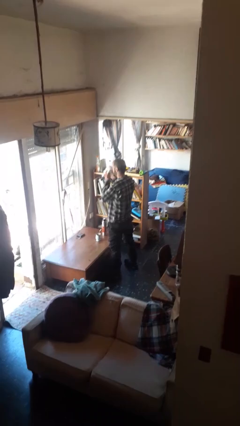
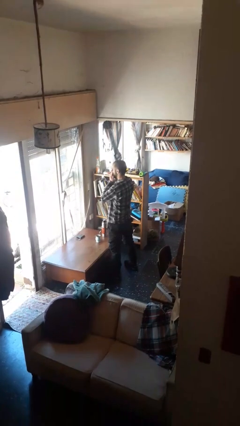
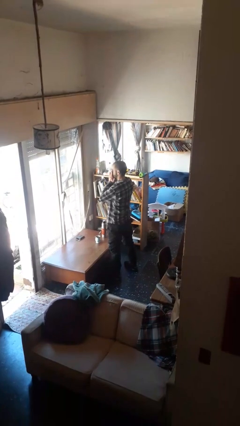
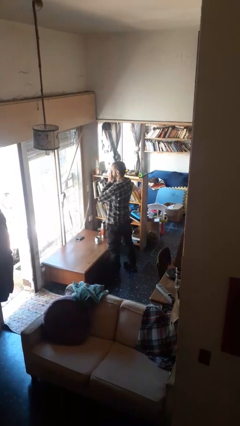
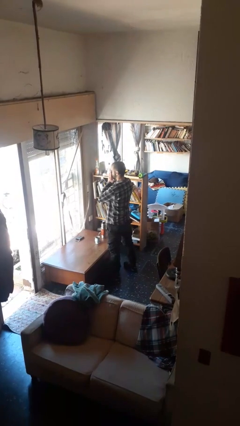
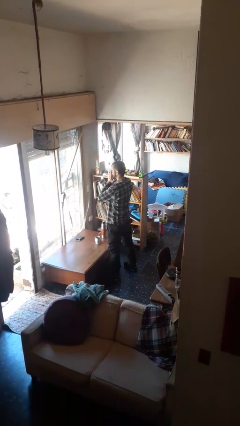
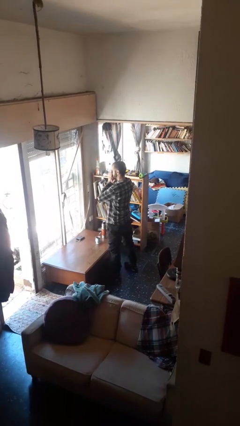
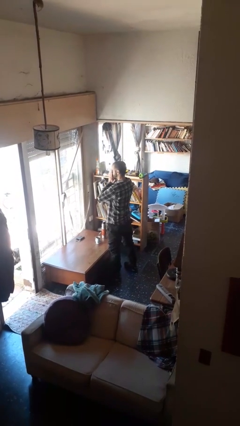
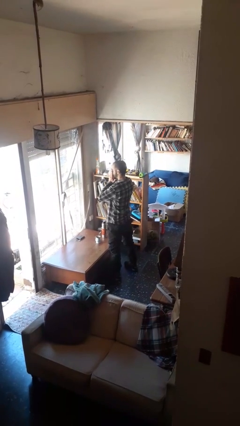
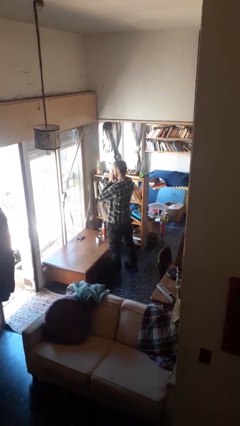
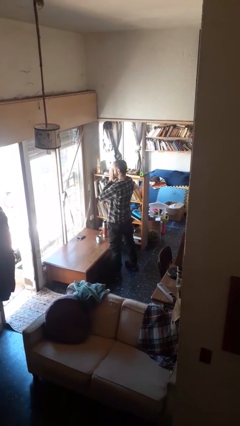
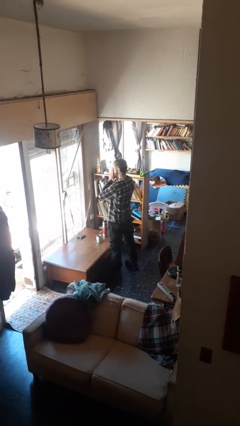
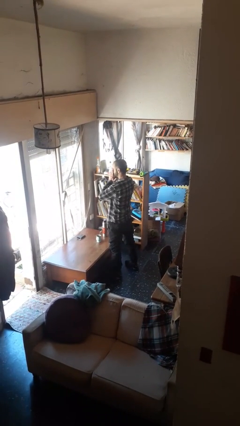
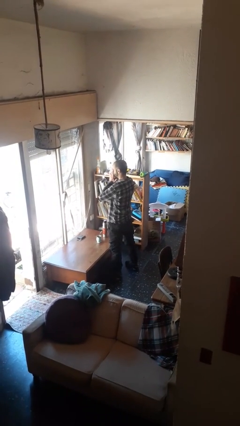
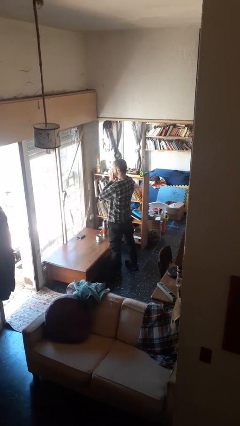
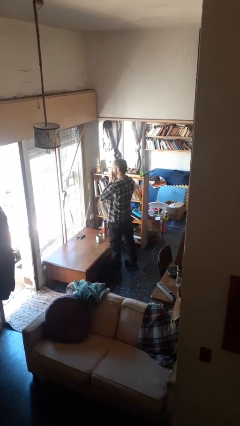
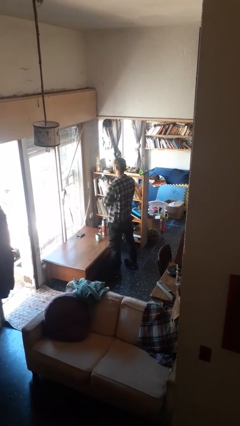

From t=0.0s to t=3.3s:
person blows nose

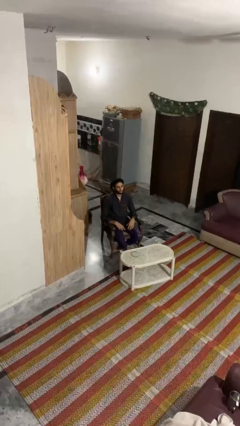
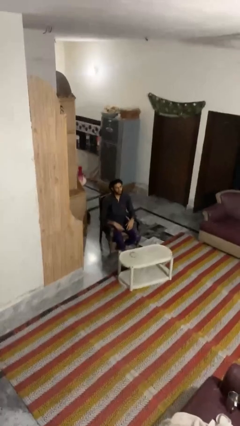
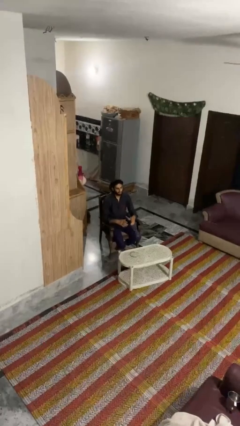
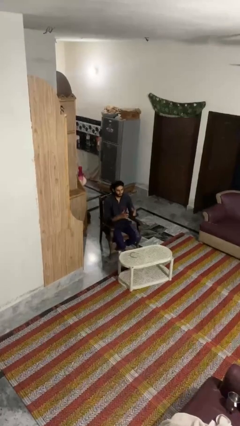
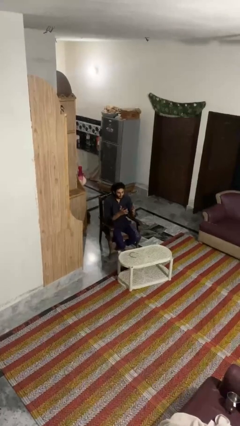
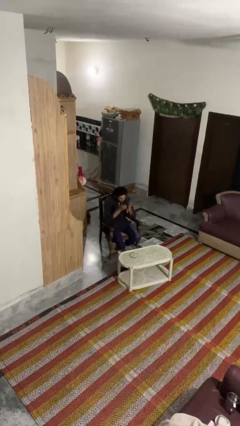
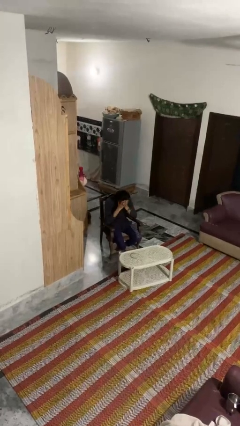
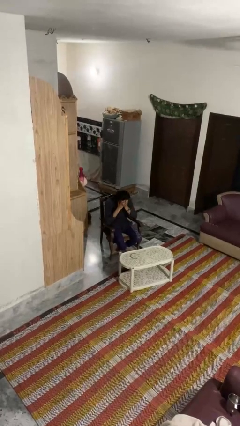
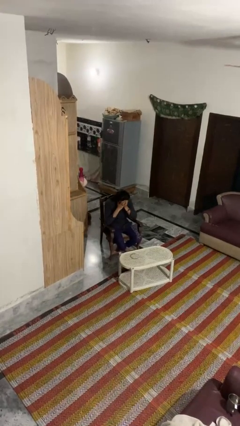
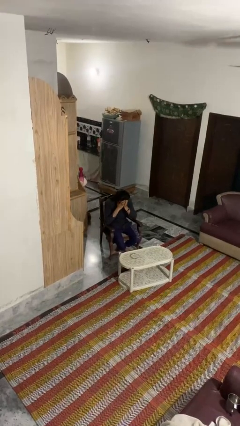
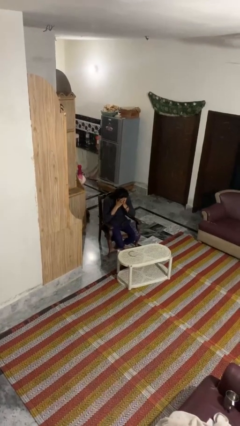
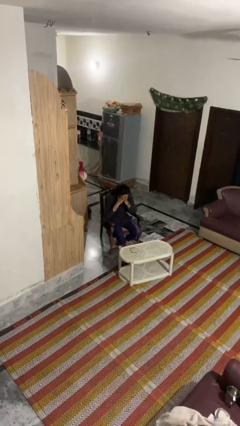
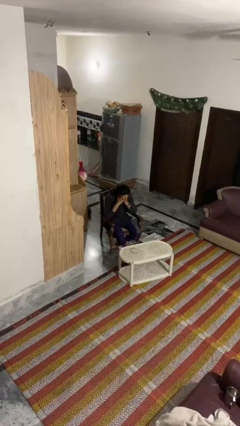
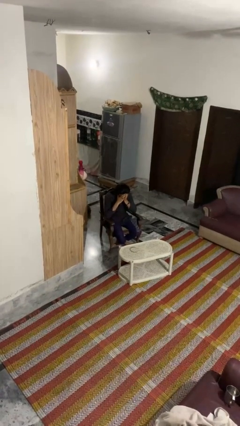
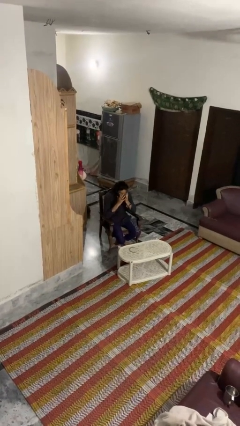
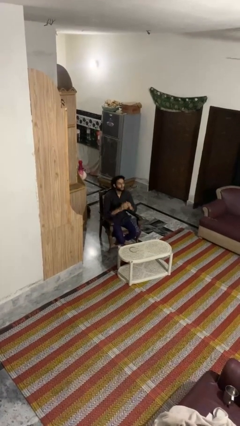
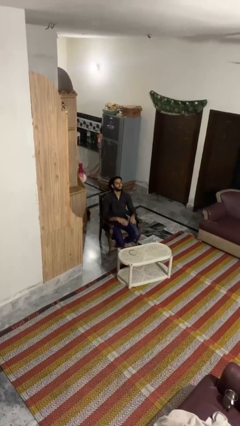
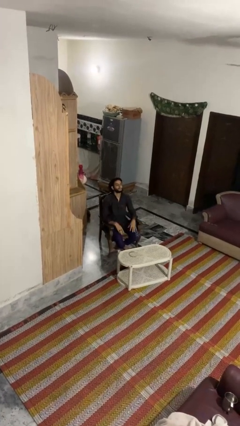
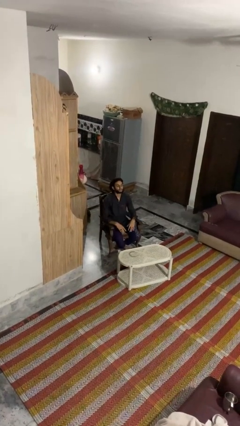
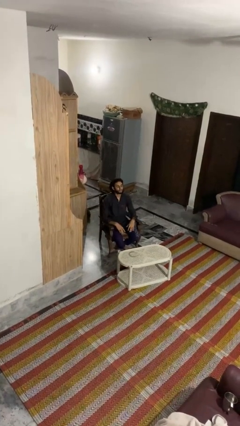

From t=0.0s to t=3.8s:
person covers face with hands

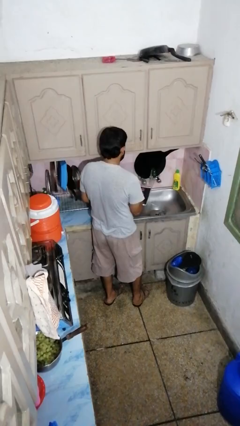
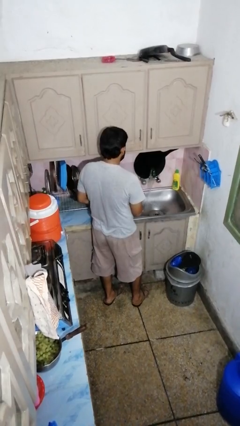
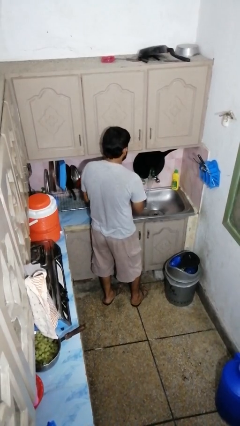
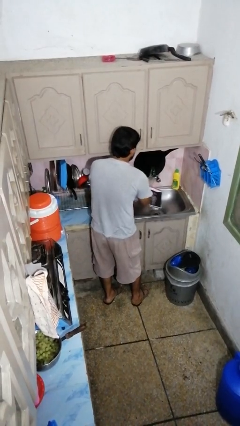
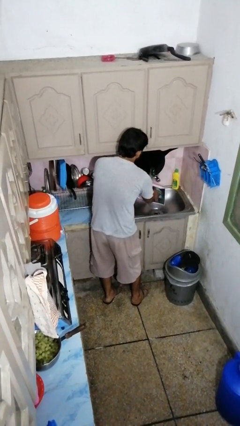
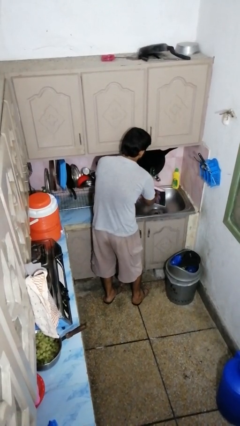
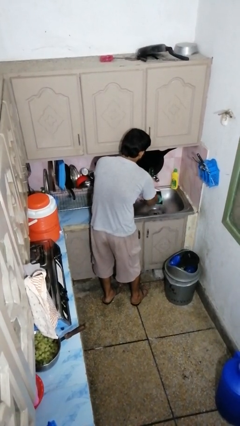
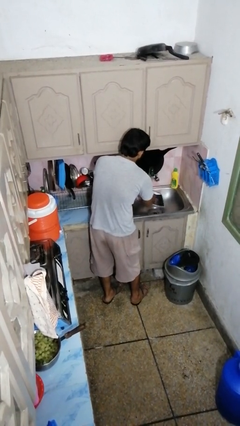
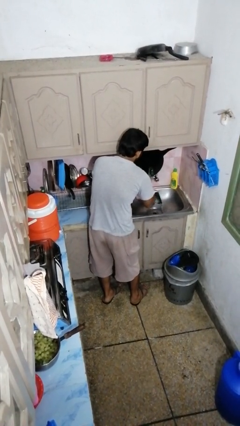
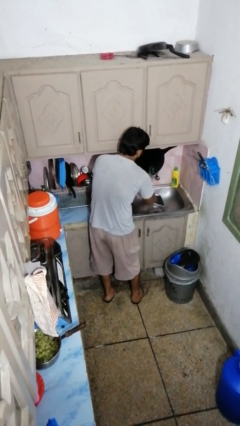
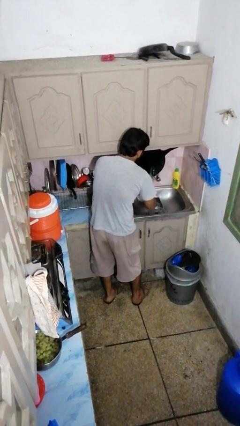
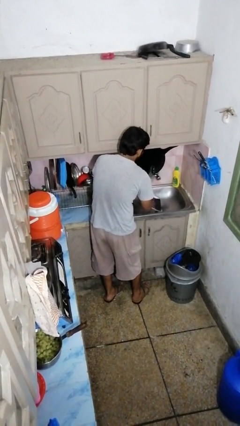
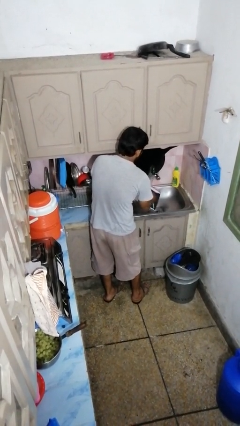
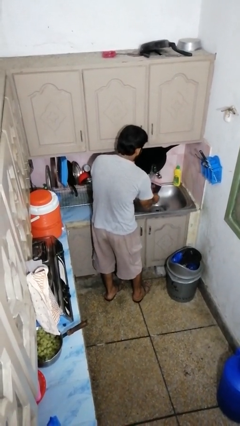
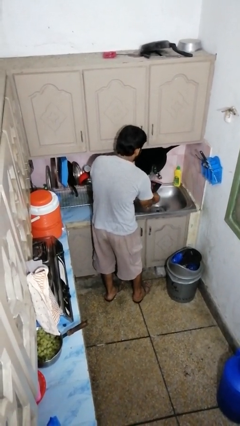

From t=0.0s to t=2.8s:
person washes dish

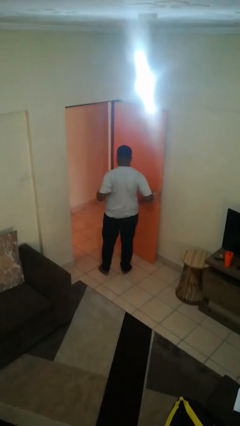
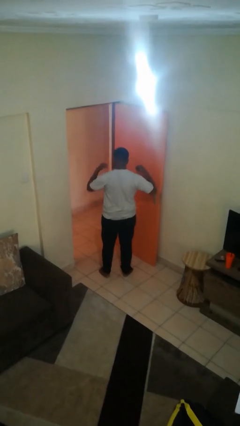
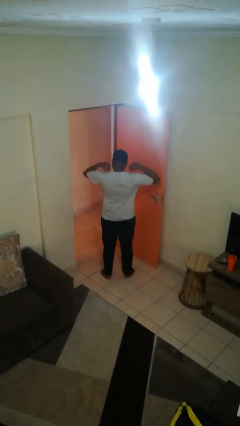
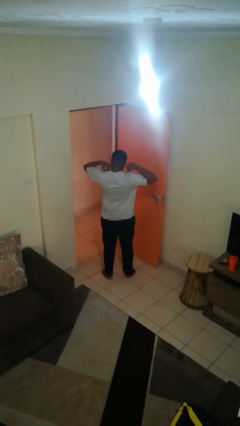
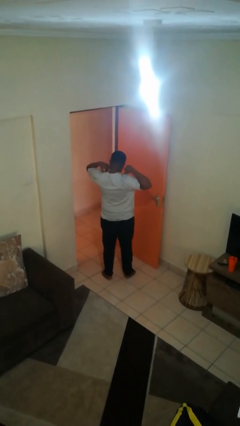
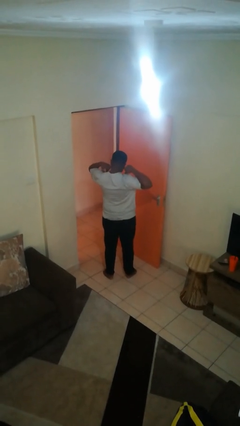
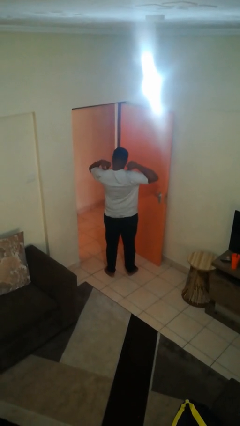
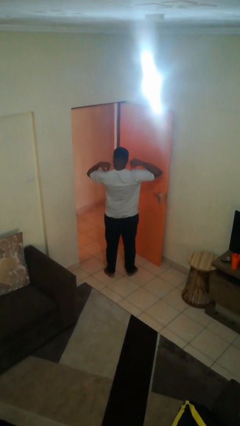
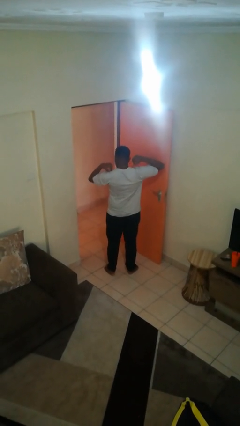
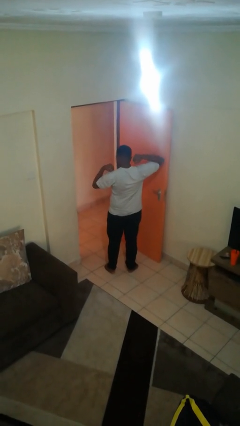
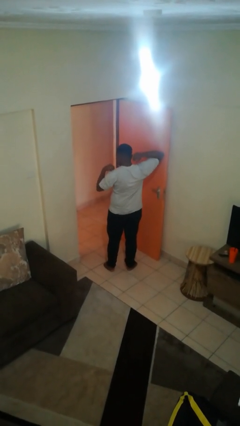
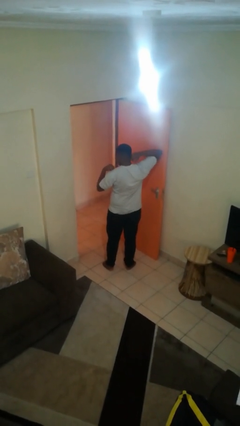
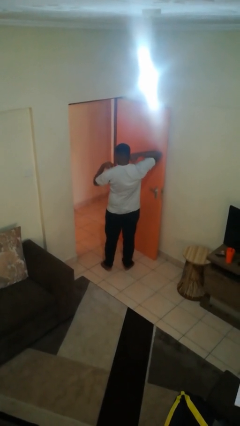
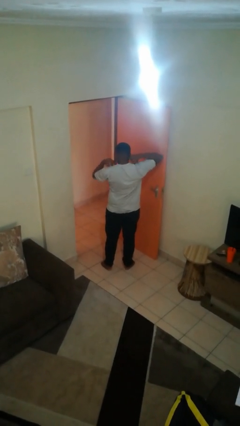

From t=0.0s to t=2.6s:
person stretches arms to side

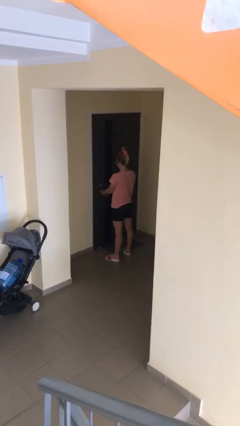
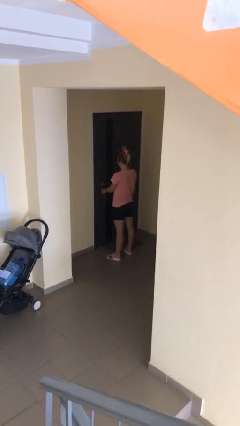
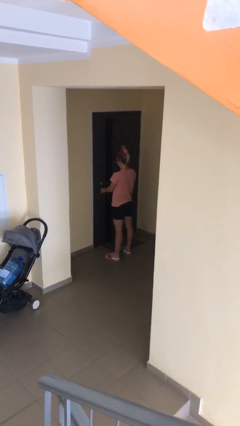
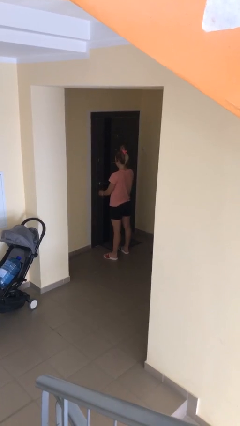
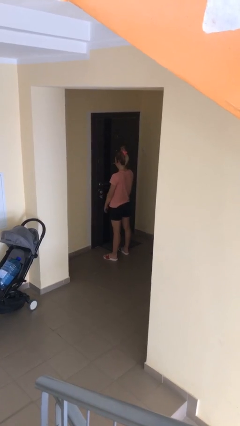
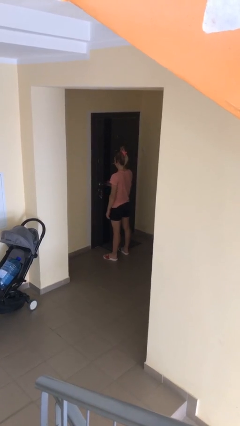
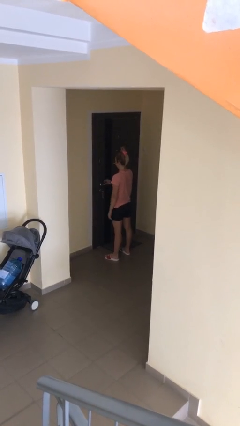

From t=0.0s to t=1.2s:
person unlocks door with keys

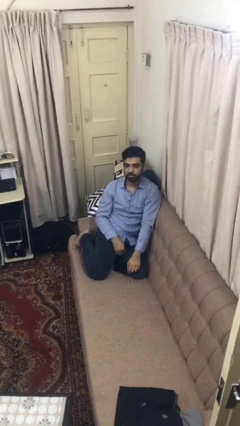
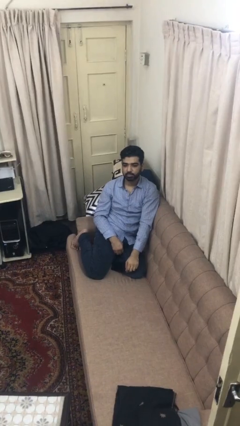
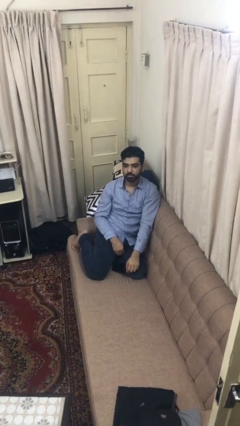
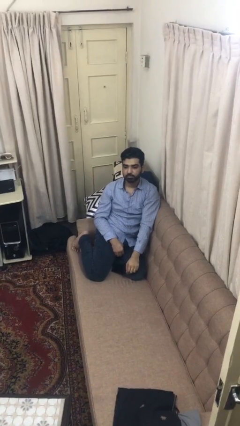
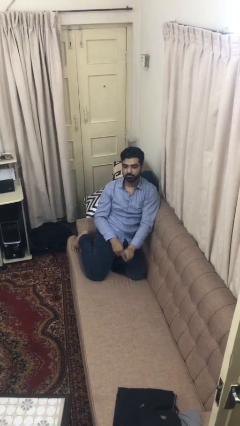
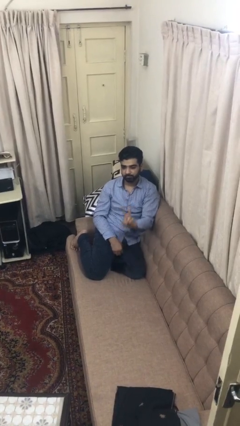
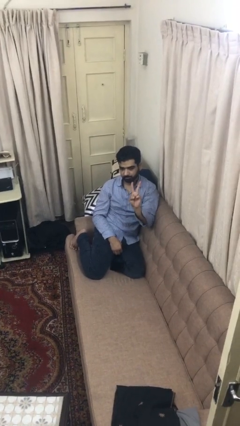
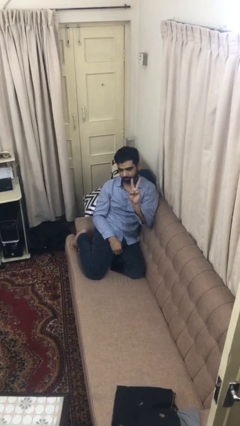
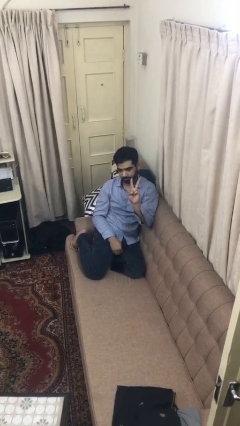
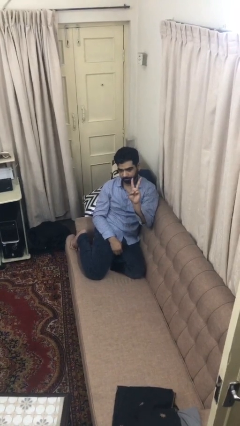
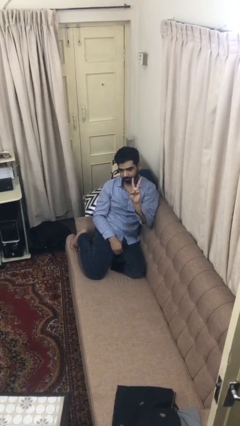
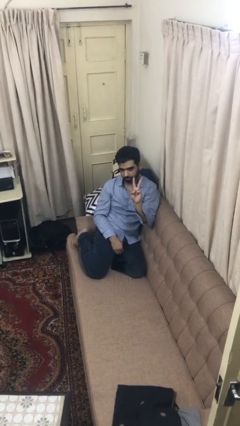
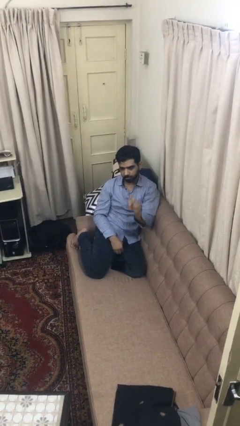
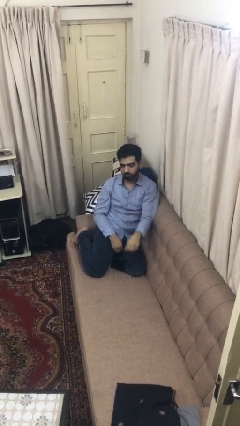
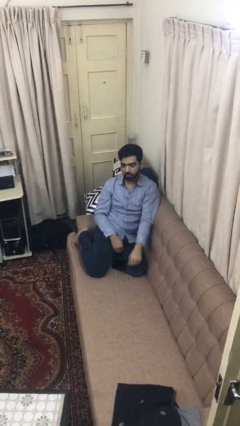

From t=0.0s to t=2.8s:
person gestures peace

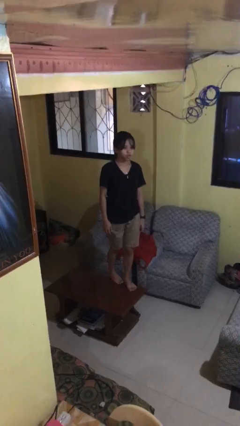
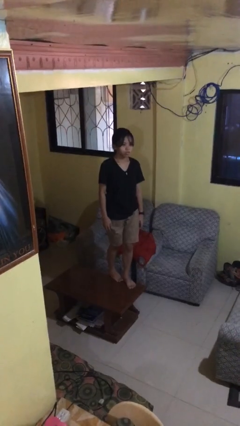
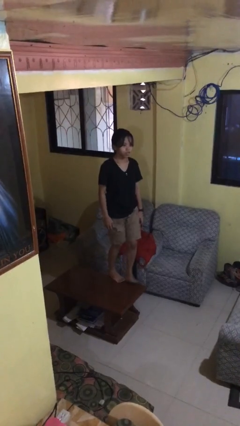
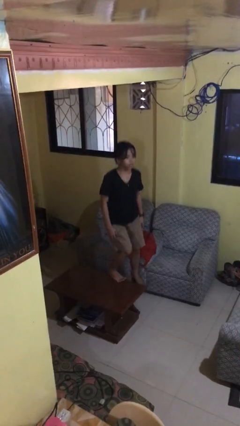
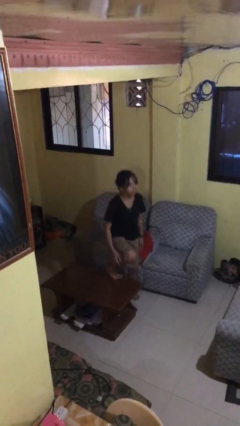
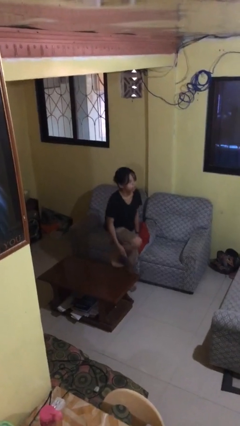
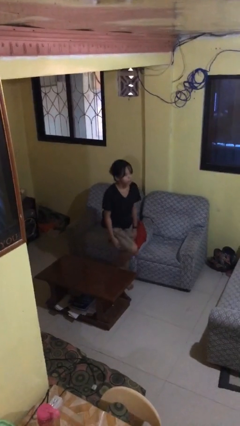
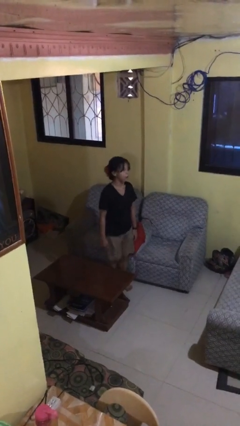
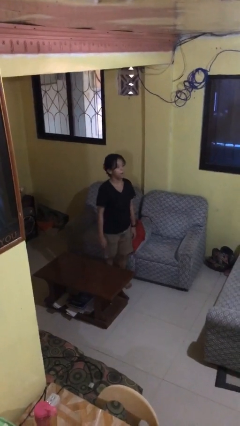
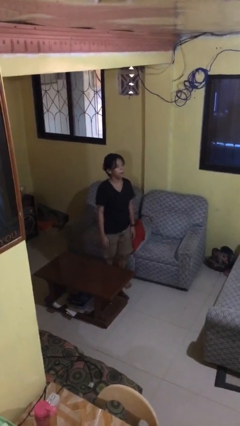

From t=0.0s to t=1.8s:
person climbs off table
